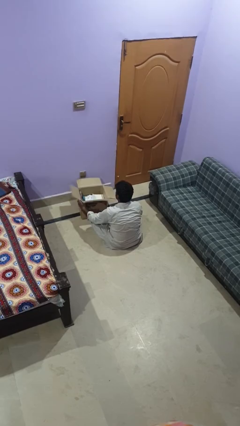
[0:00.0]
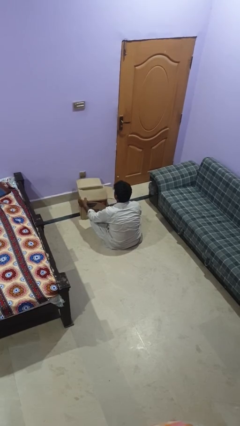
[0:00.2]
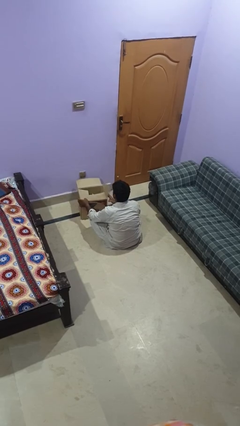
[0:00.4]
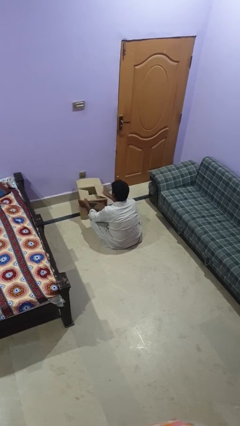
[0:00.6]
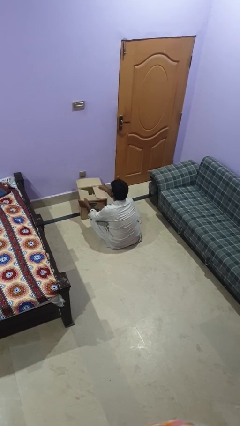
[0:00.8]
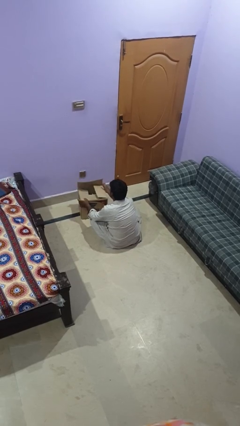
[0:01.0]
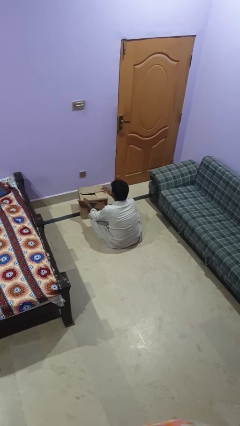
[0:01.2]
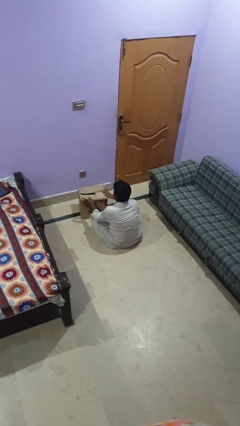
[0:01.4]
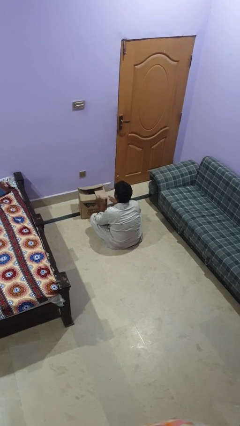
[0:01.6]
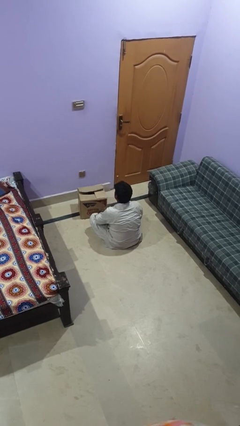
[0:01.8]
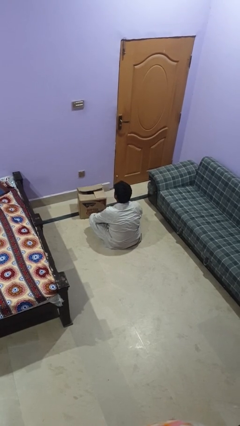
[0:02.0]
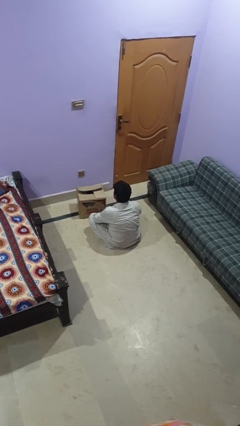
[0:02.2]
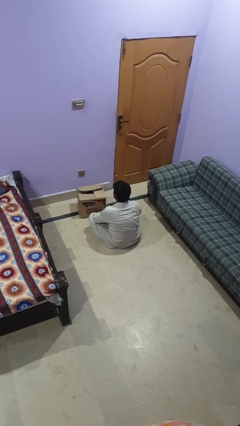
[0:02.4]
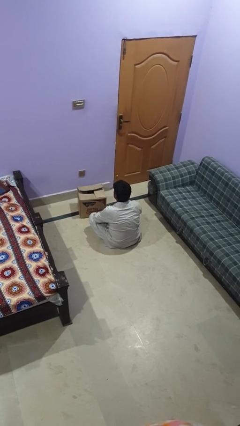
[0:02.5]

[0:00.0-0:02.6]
person closes box

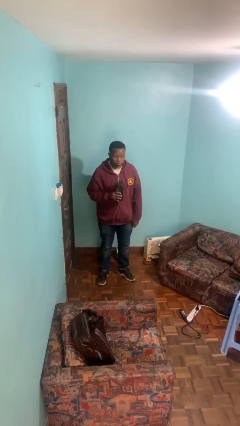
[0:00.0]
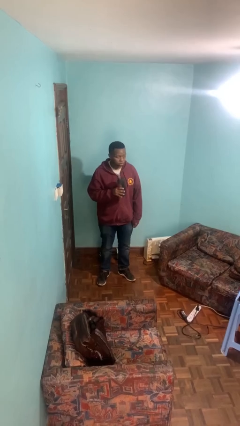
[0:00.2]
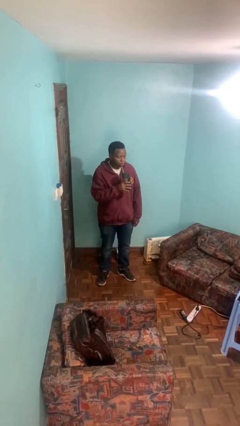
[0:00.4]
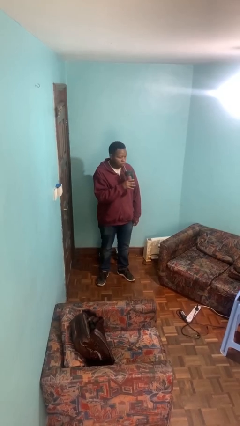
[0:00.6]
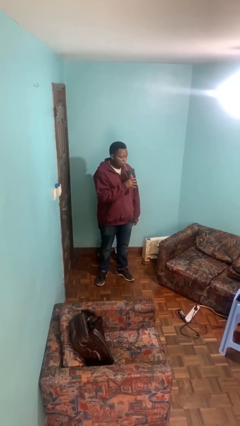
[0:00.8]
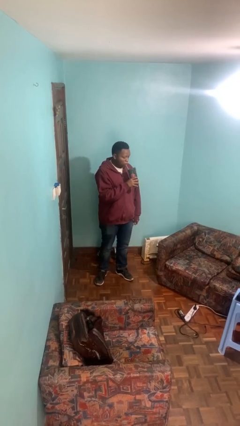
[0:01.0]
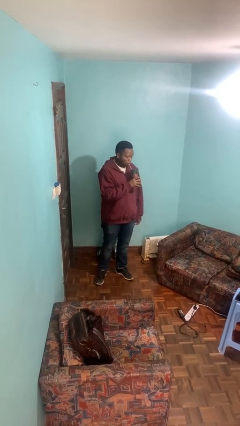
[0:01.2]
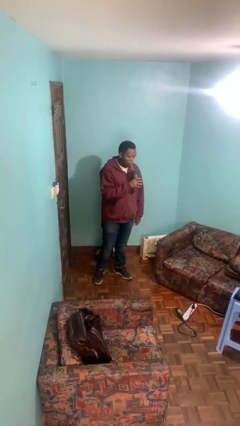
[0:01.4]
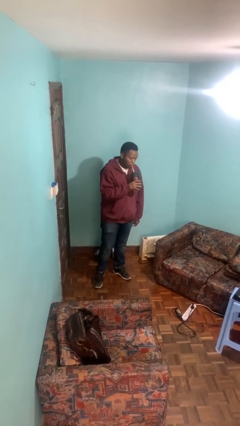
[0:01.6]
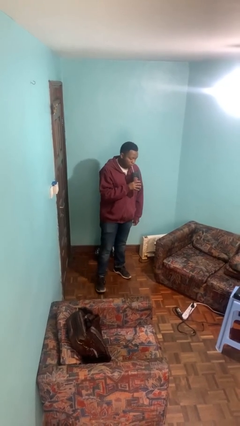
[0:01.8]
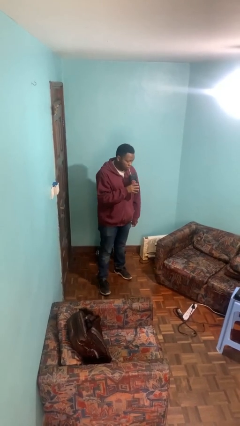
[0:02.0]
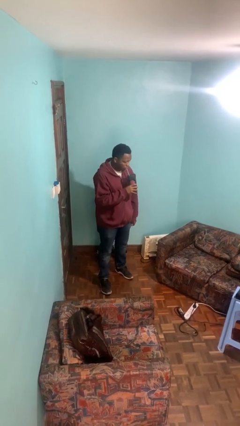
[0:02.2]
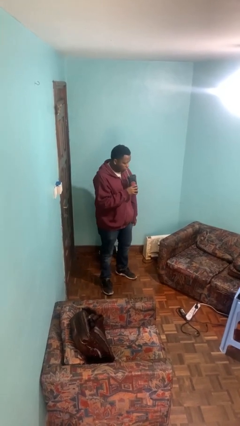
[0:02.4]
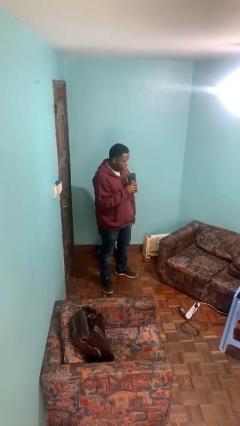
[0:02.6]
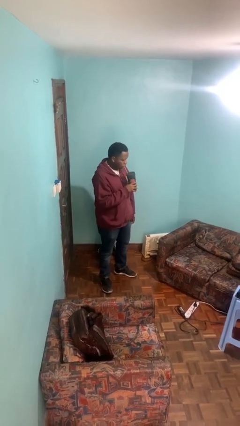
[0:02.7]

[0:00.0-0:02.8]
person drinks from straw

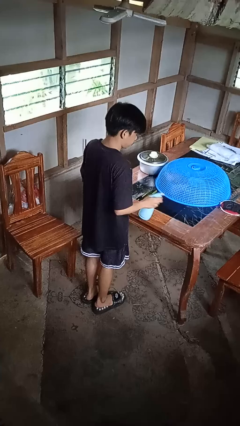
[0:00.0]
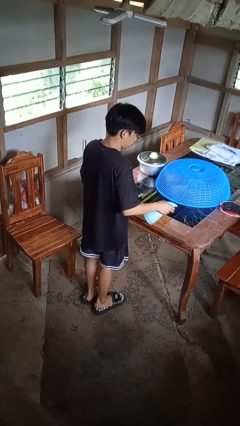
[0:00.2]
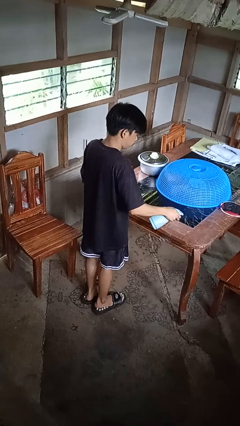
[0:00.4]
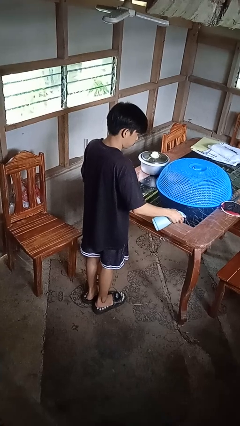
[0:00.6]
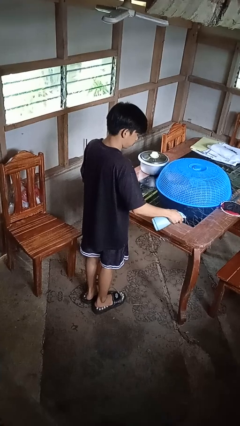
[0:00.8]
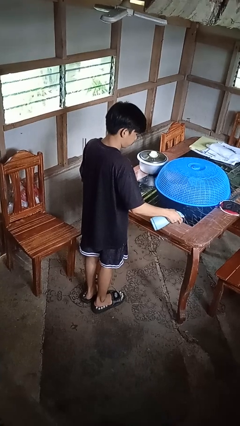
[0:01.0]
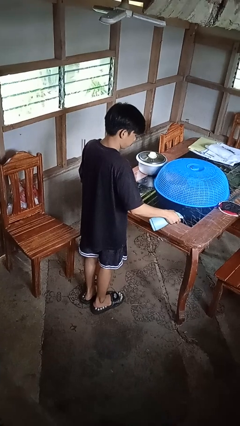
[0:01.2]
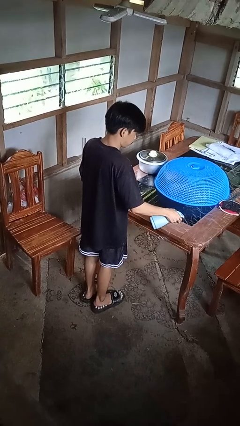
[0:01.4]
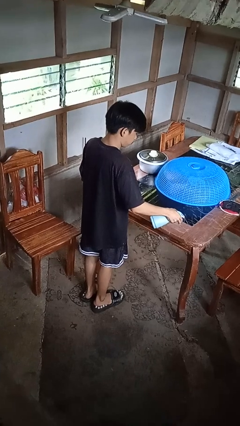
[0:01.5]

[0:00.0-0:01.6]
person sprays from bottle

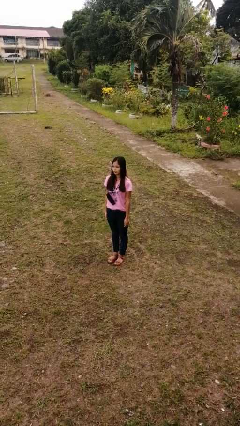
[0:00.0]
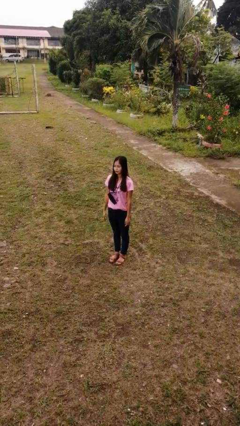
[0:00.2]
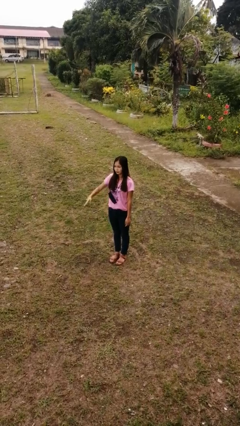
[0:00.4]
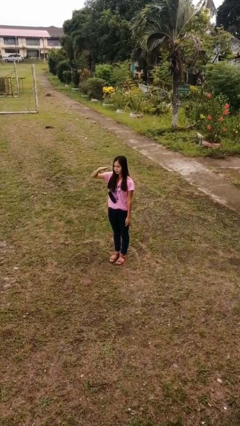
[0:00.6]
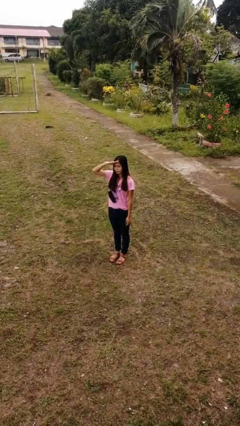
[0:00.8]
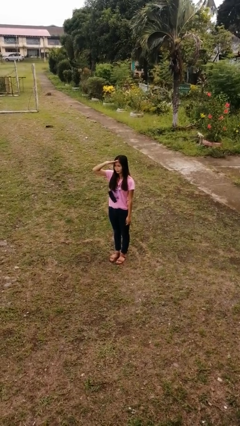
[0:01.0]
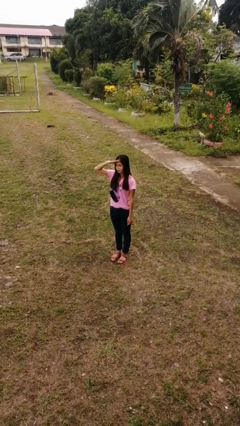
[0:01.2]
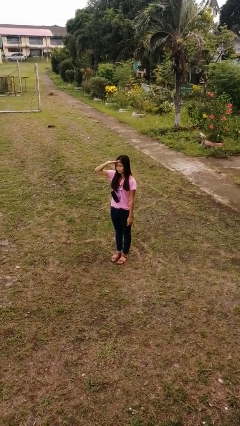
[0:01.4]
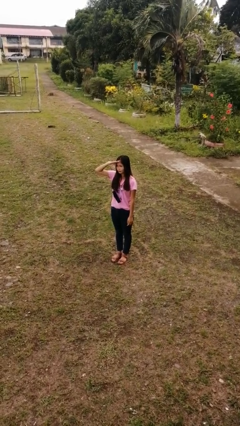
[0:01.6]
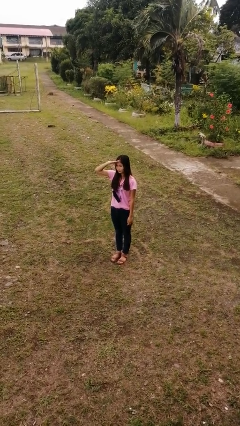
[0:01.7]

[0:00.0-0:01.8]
person salutes

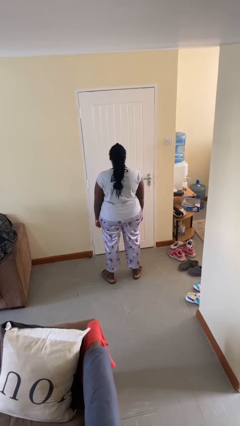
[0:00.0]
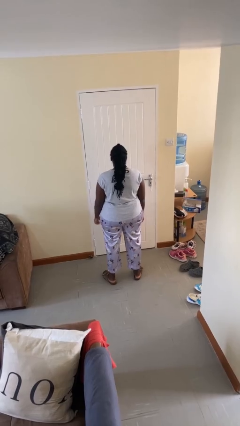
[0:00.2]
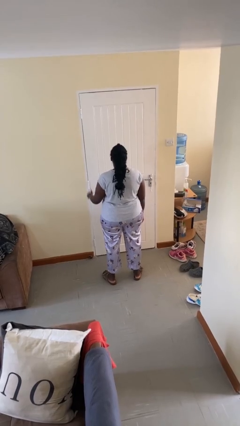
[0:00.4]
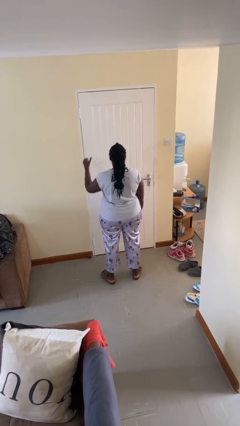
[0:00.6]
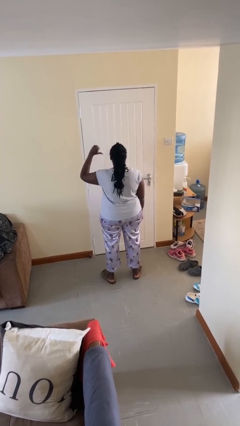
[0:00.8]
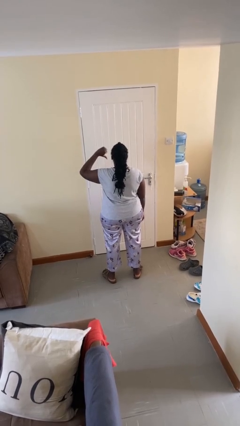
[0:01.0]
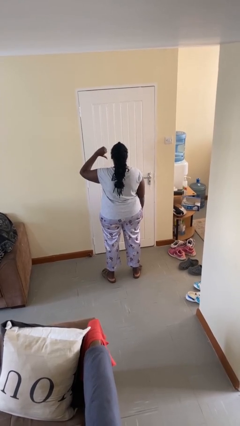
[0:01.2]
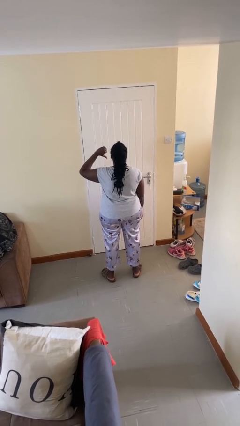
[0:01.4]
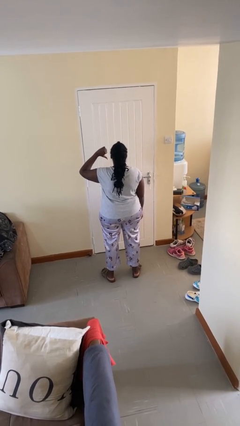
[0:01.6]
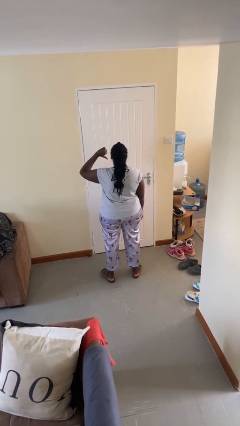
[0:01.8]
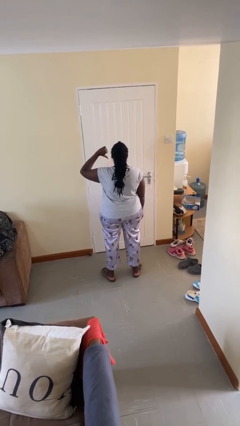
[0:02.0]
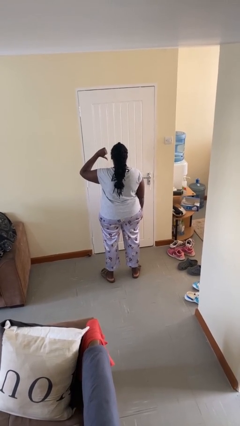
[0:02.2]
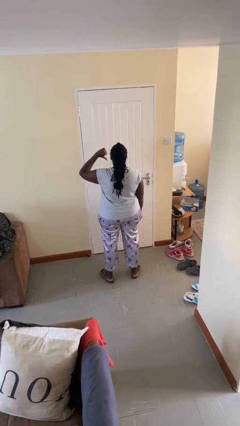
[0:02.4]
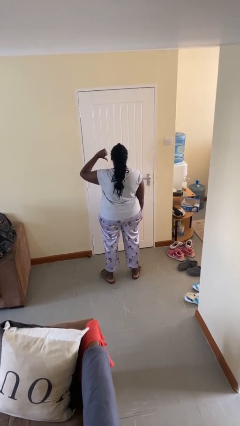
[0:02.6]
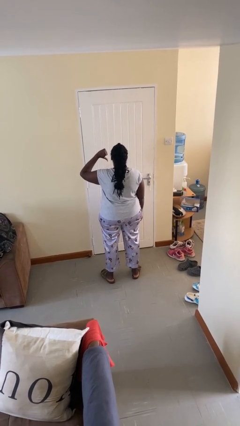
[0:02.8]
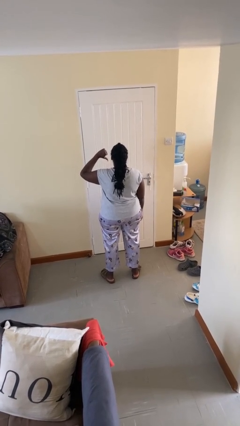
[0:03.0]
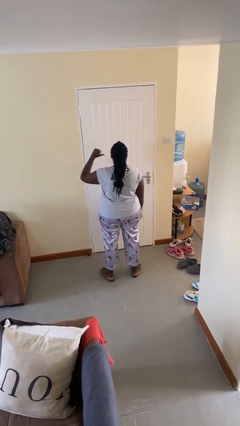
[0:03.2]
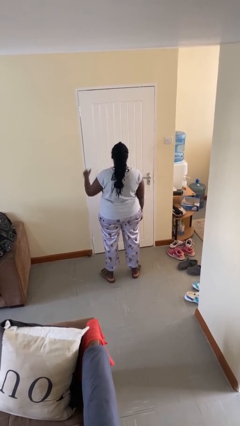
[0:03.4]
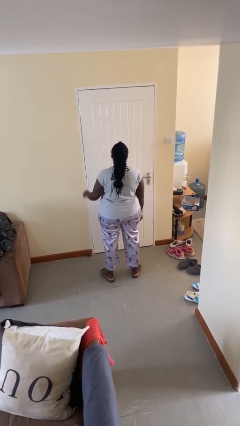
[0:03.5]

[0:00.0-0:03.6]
person gestures thumbs down

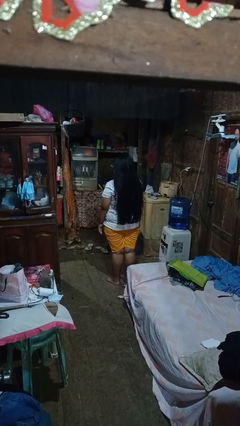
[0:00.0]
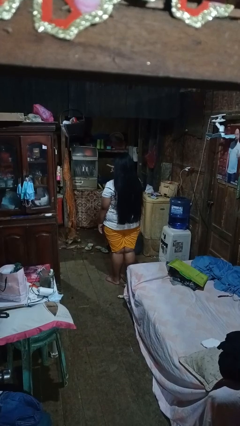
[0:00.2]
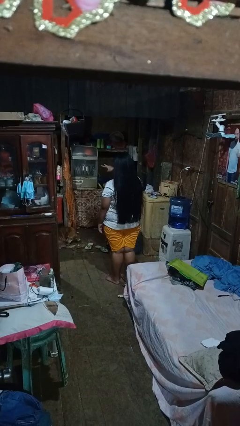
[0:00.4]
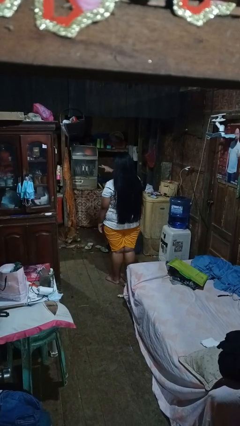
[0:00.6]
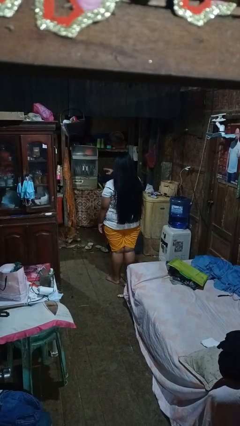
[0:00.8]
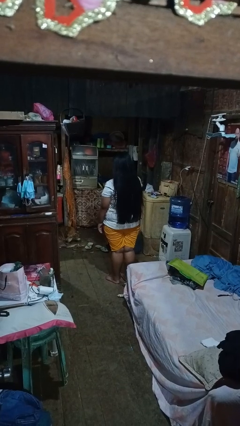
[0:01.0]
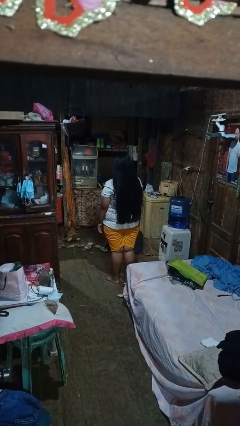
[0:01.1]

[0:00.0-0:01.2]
person gestures watch closely

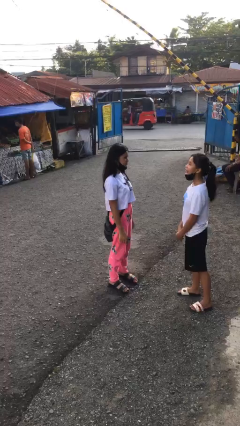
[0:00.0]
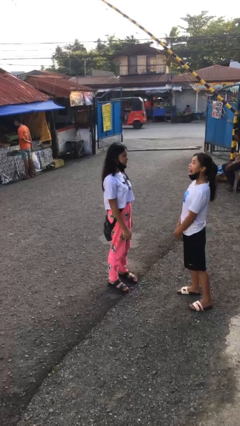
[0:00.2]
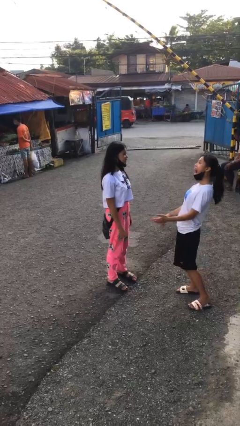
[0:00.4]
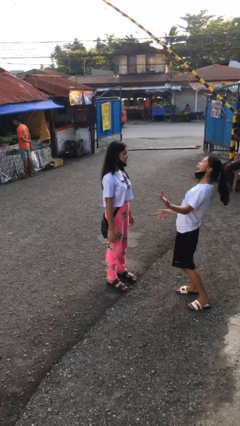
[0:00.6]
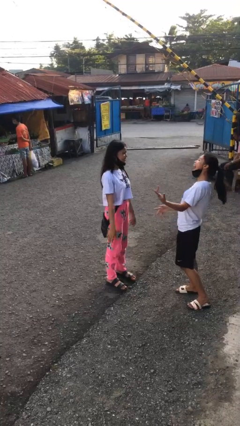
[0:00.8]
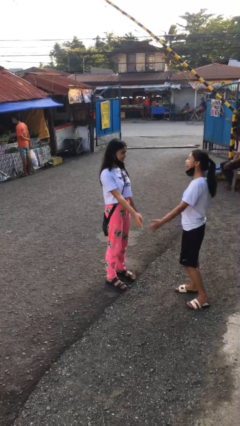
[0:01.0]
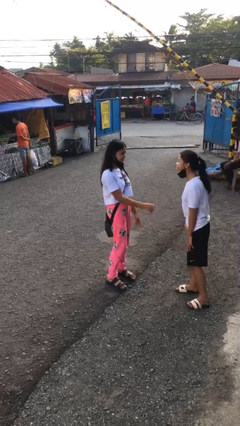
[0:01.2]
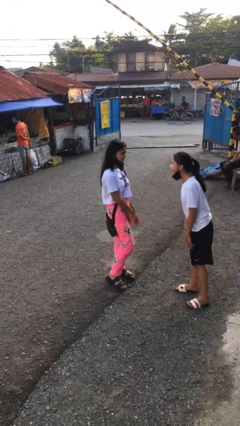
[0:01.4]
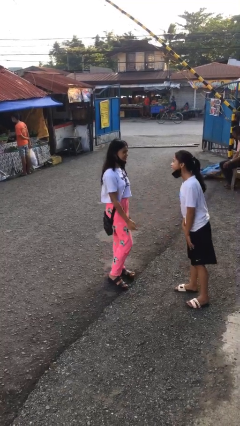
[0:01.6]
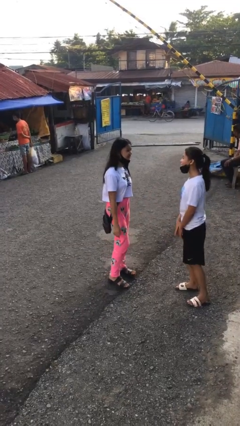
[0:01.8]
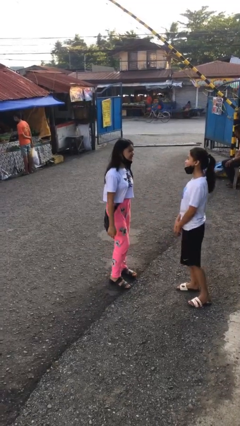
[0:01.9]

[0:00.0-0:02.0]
person laughs with person

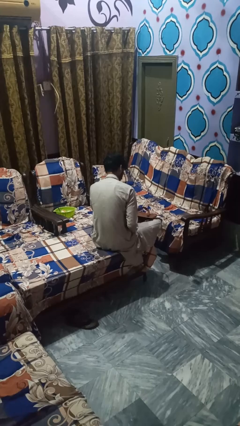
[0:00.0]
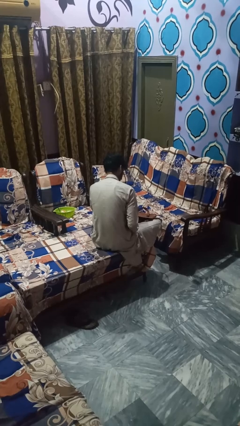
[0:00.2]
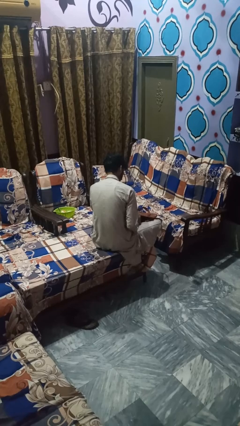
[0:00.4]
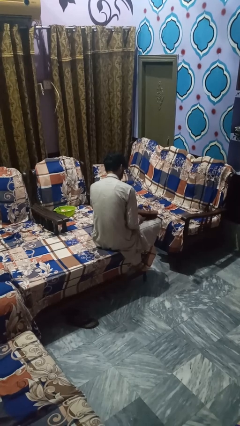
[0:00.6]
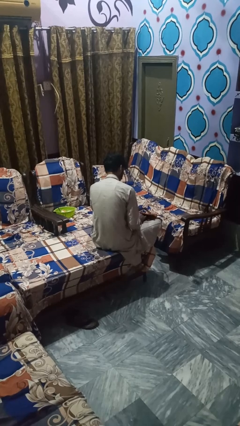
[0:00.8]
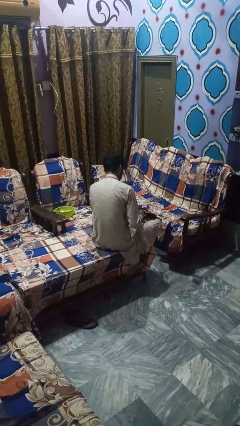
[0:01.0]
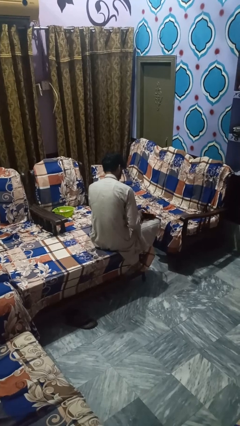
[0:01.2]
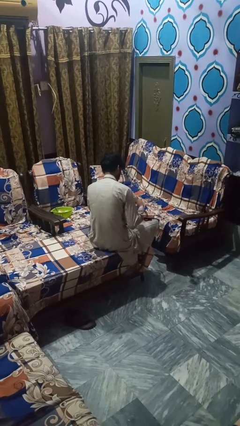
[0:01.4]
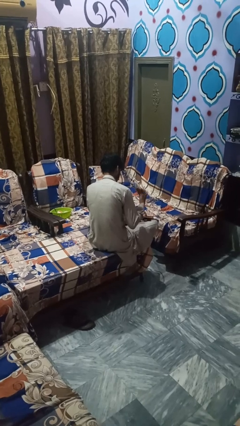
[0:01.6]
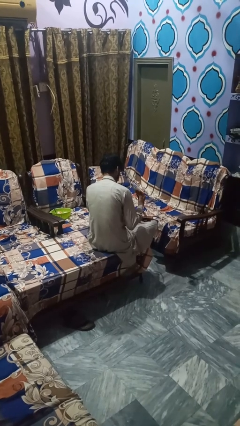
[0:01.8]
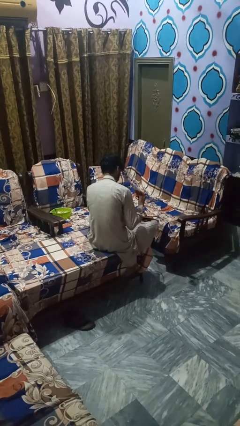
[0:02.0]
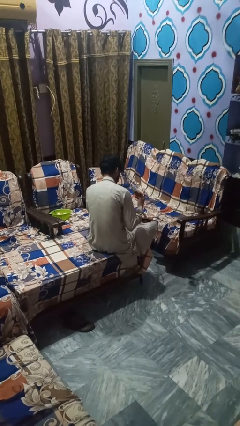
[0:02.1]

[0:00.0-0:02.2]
person takes object from bag
